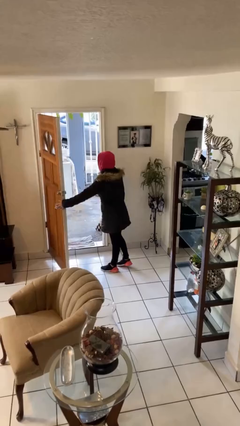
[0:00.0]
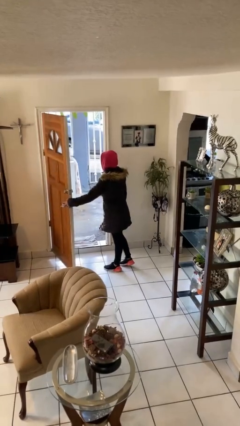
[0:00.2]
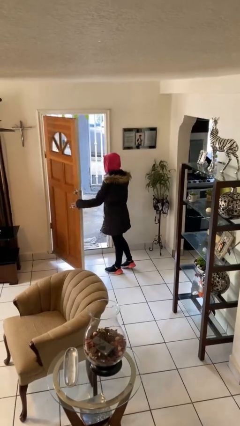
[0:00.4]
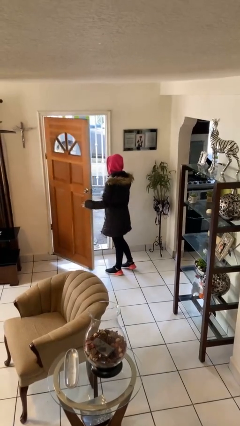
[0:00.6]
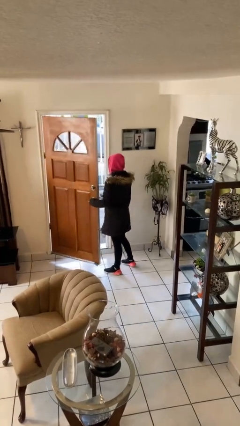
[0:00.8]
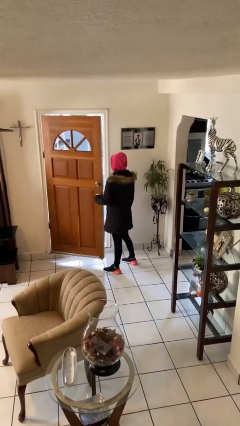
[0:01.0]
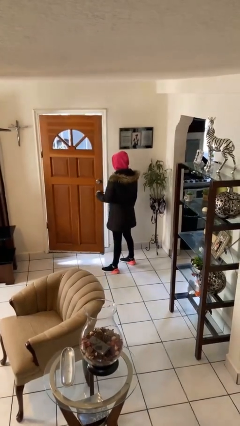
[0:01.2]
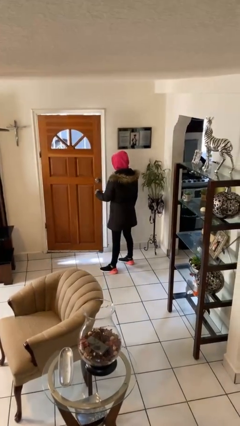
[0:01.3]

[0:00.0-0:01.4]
person closes facility door

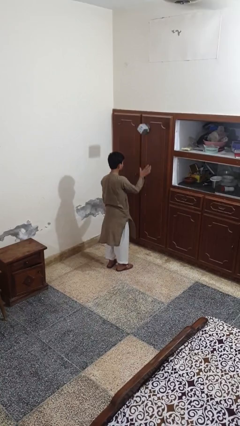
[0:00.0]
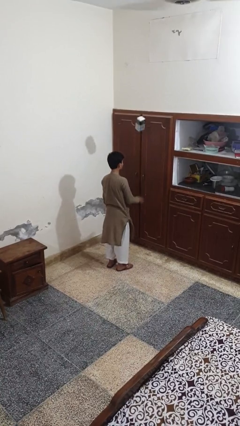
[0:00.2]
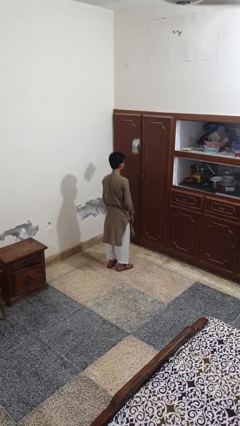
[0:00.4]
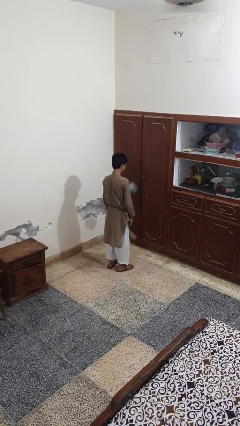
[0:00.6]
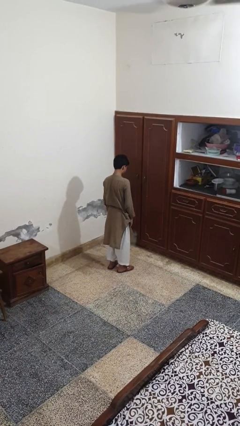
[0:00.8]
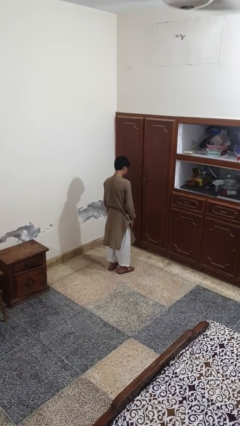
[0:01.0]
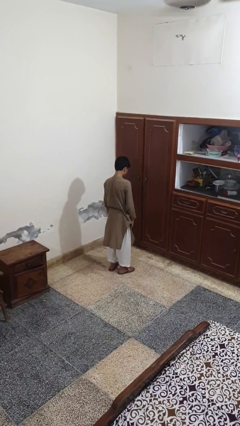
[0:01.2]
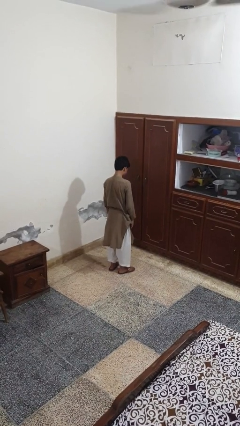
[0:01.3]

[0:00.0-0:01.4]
person throws object into air

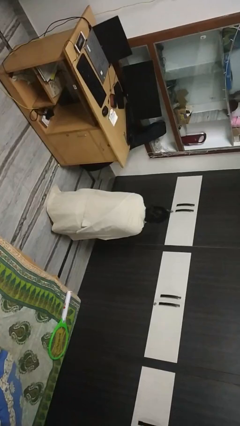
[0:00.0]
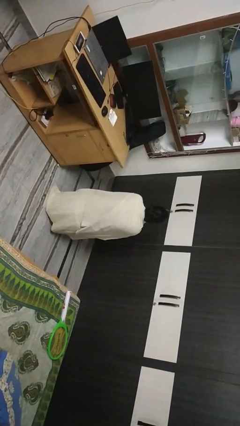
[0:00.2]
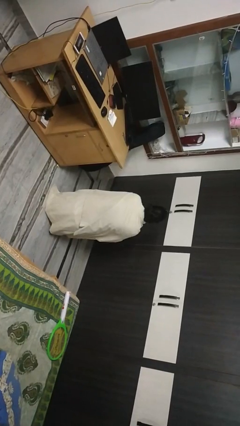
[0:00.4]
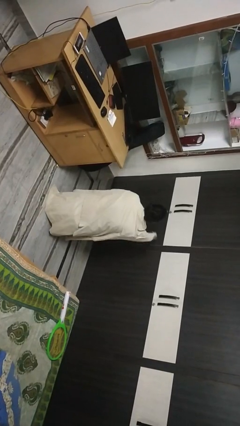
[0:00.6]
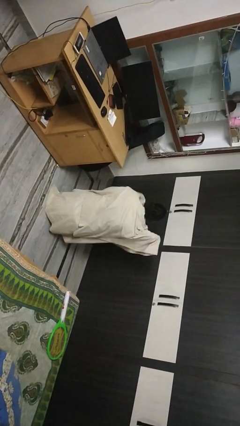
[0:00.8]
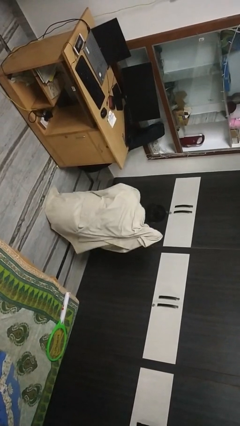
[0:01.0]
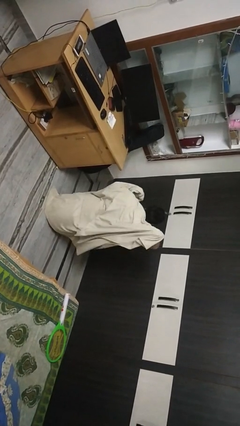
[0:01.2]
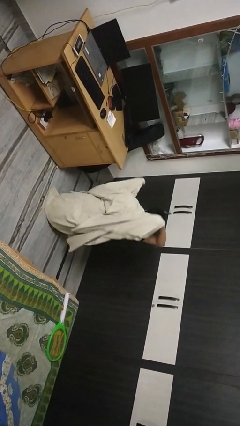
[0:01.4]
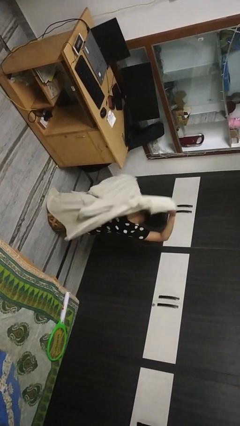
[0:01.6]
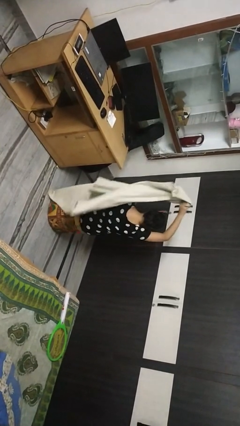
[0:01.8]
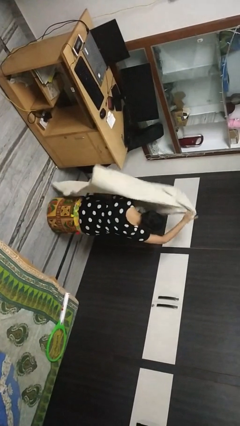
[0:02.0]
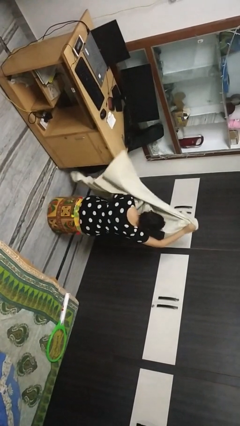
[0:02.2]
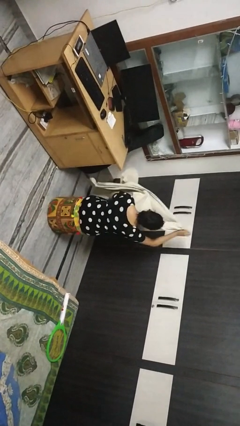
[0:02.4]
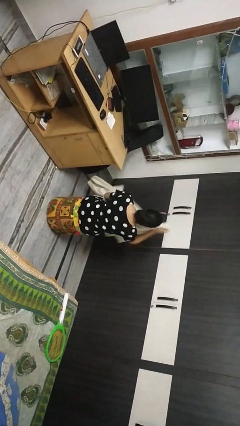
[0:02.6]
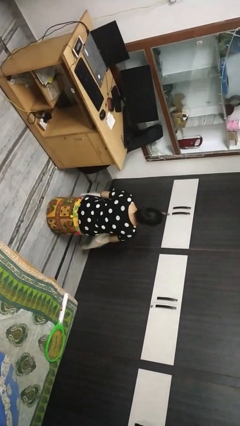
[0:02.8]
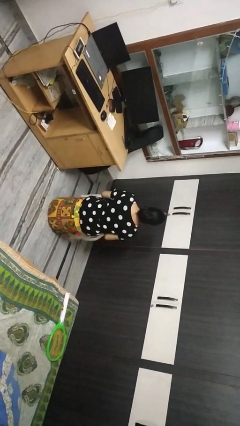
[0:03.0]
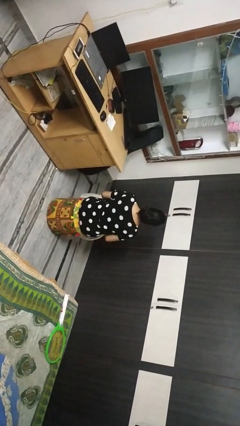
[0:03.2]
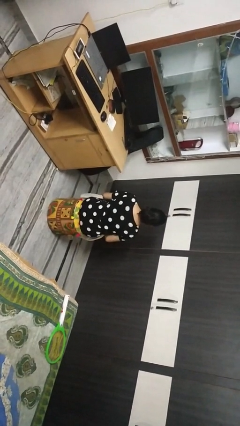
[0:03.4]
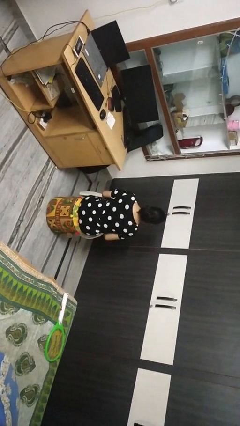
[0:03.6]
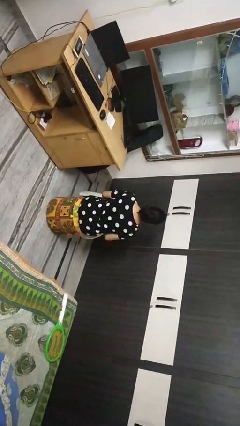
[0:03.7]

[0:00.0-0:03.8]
person uncovers with blanket

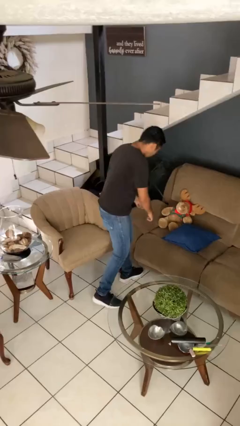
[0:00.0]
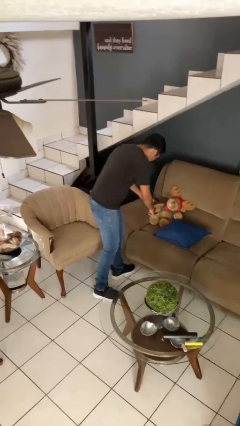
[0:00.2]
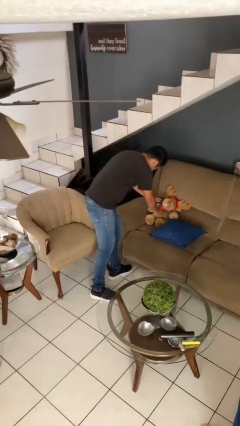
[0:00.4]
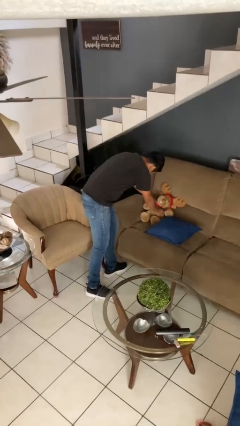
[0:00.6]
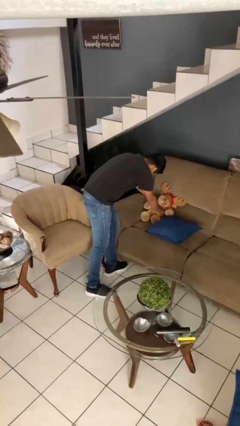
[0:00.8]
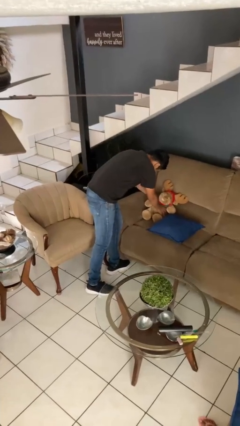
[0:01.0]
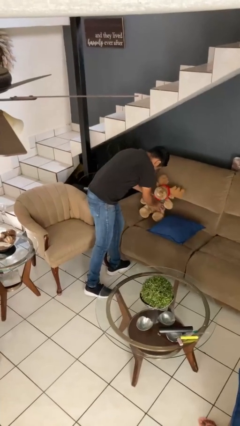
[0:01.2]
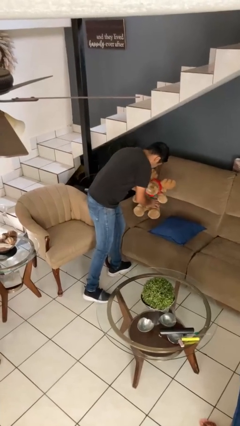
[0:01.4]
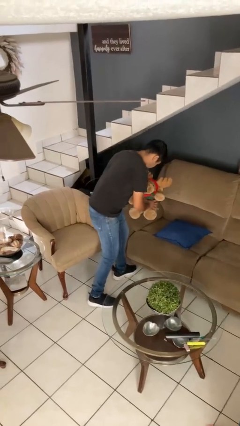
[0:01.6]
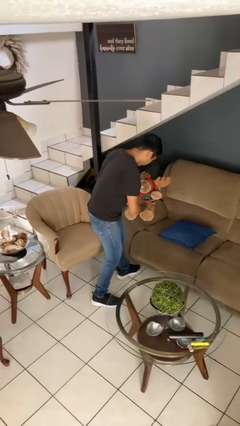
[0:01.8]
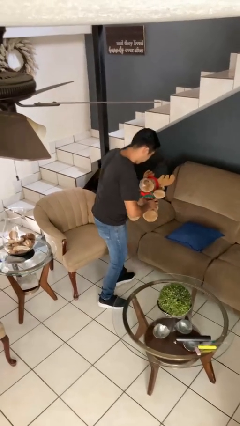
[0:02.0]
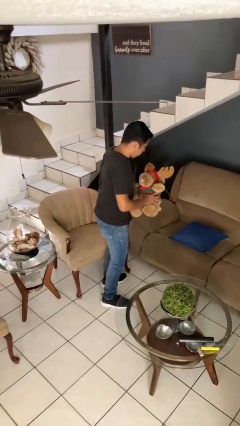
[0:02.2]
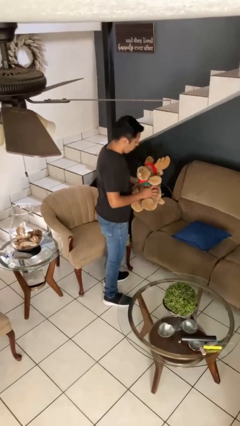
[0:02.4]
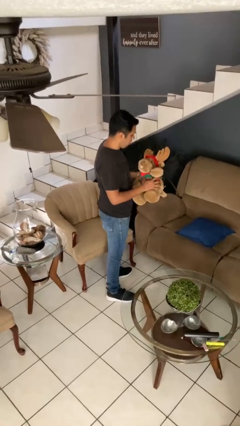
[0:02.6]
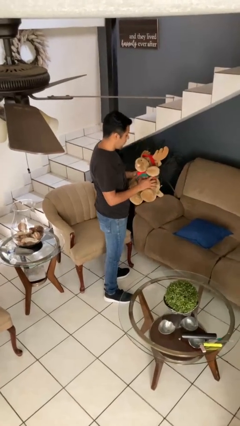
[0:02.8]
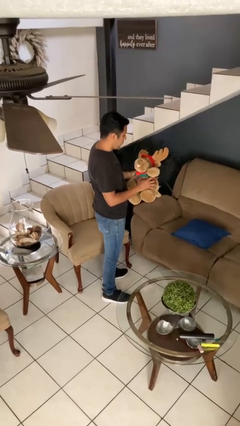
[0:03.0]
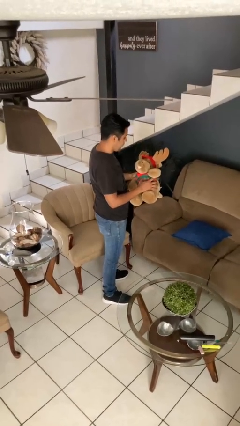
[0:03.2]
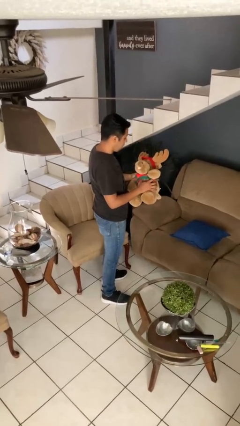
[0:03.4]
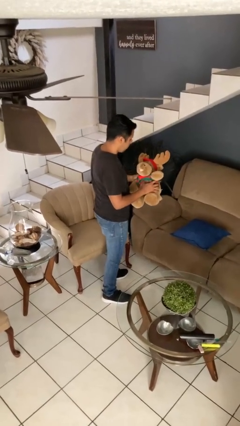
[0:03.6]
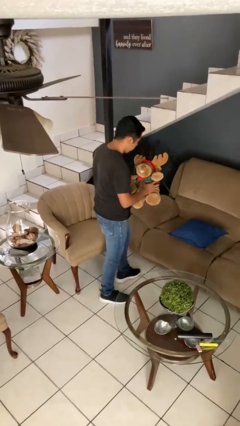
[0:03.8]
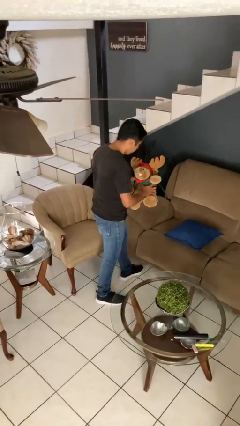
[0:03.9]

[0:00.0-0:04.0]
person picks up object from couch

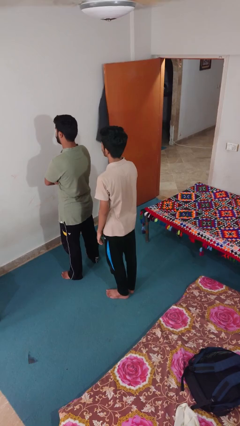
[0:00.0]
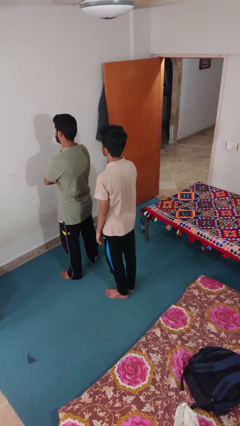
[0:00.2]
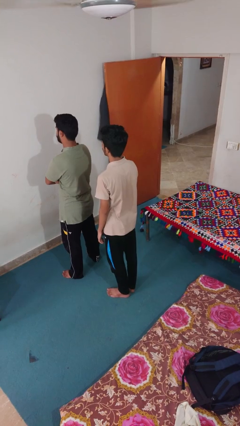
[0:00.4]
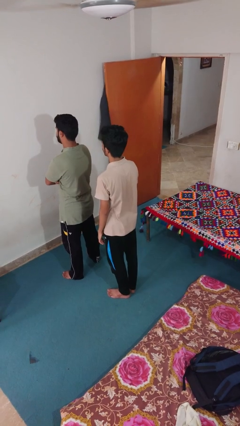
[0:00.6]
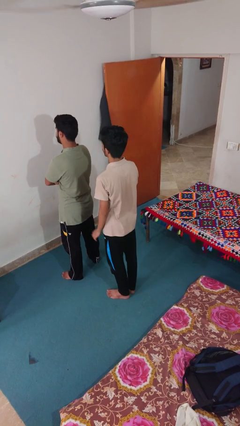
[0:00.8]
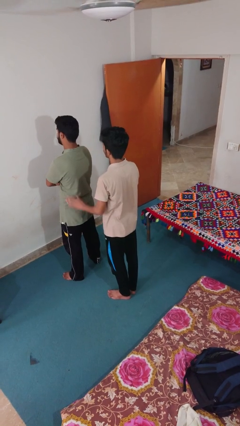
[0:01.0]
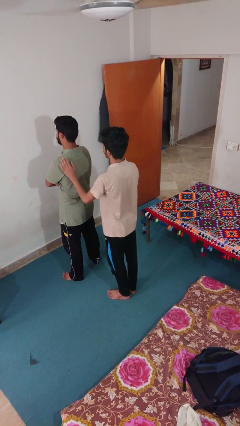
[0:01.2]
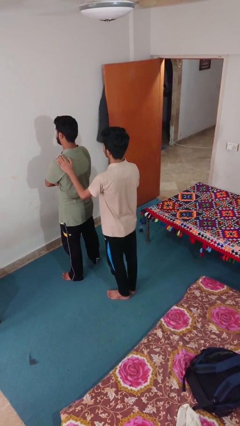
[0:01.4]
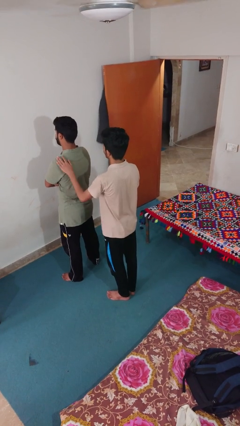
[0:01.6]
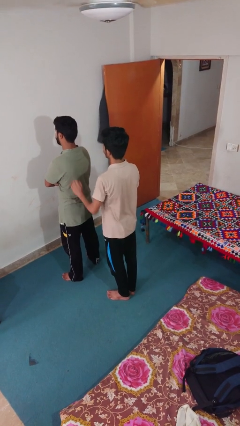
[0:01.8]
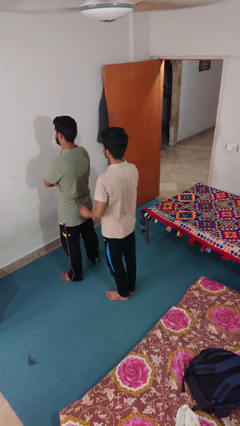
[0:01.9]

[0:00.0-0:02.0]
person touches back of person

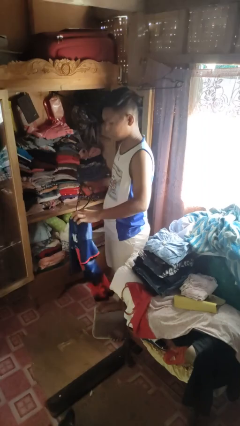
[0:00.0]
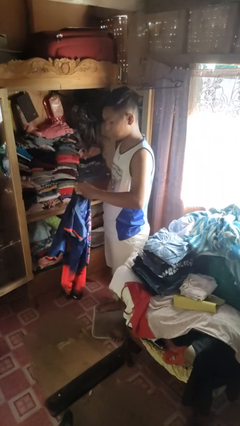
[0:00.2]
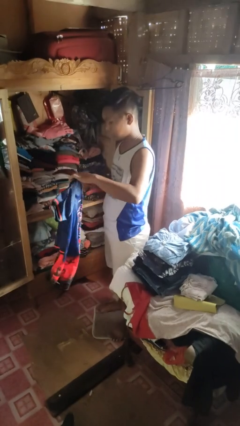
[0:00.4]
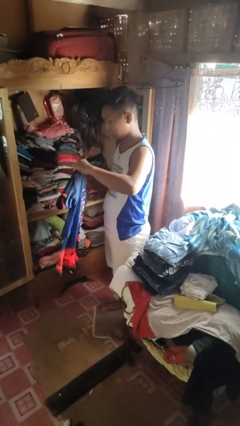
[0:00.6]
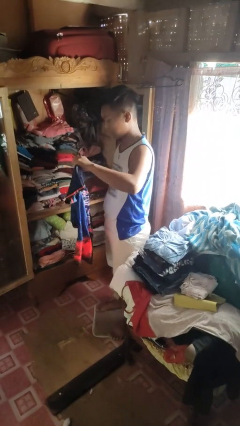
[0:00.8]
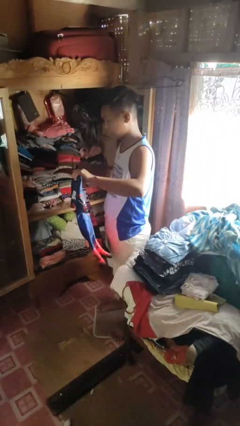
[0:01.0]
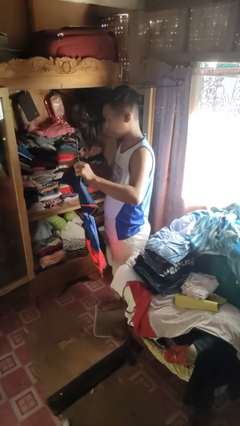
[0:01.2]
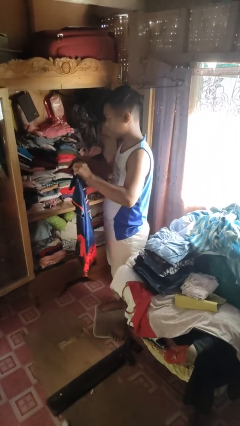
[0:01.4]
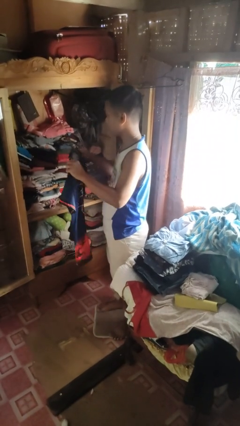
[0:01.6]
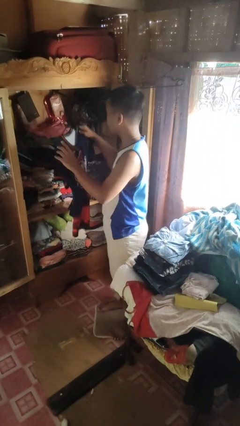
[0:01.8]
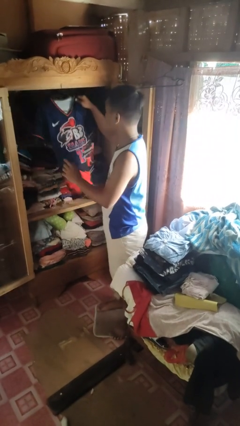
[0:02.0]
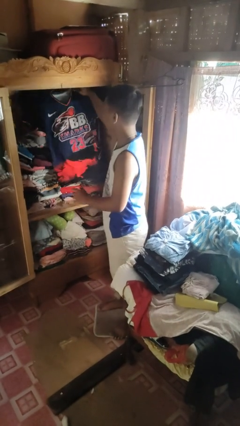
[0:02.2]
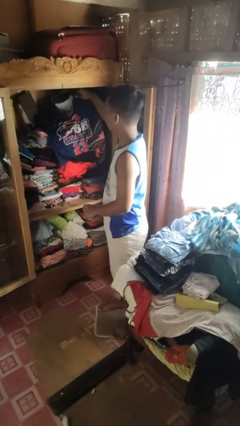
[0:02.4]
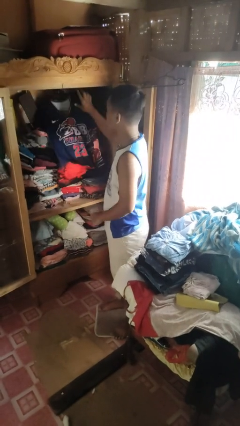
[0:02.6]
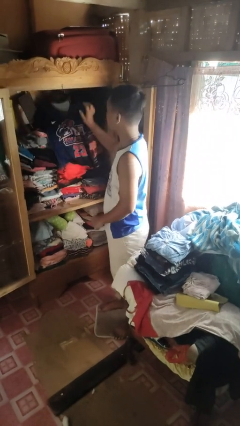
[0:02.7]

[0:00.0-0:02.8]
person puts clothes into closet

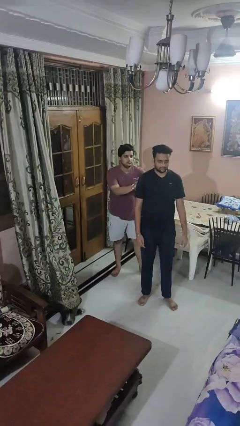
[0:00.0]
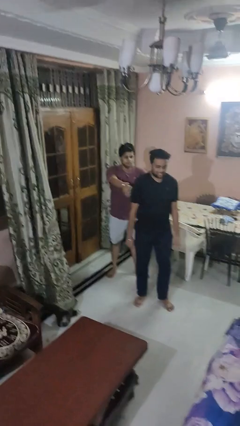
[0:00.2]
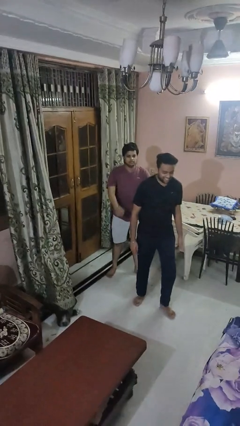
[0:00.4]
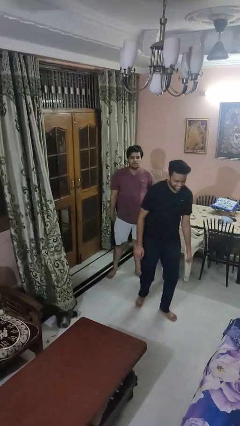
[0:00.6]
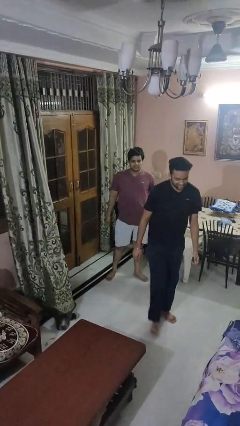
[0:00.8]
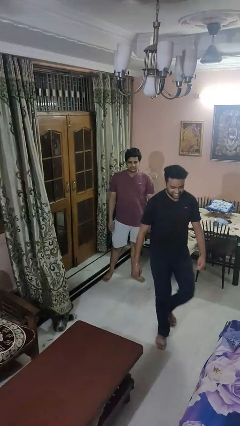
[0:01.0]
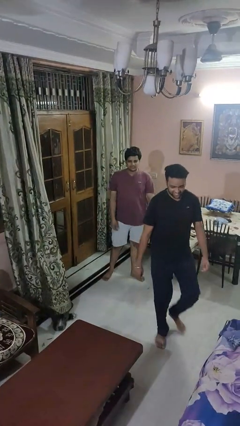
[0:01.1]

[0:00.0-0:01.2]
person shoves person

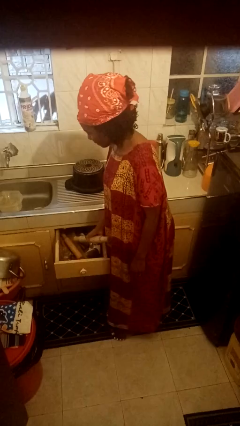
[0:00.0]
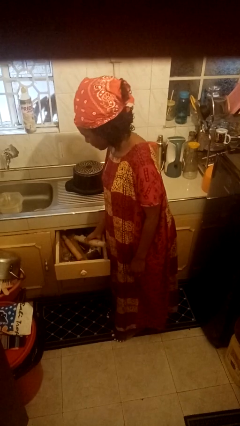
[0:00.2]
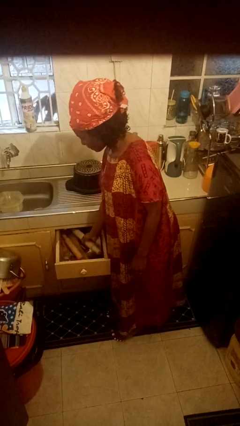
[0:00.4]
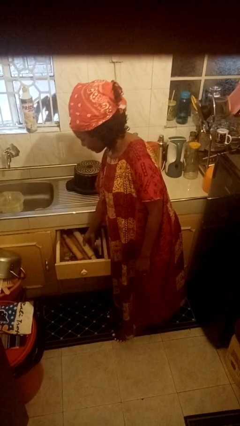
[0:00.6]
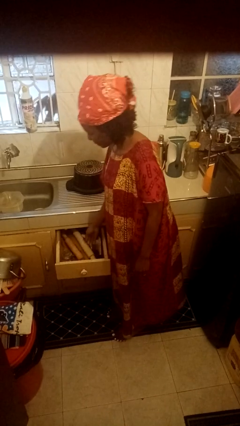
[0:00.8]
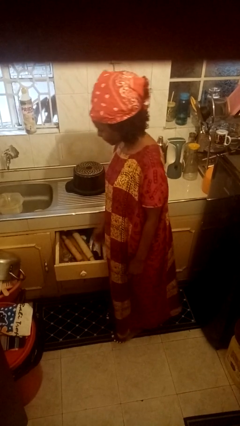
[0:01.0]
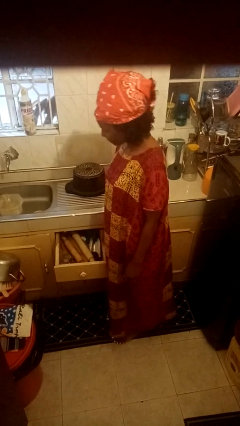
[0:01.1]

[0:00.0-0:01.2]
person puts object into kitchen drawer
